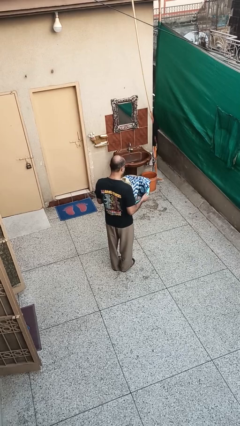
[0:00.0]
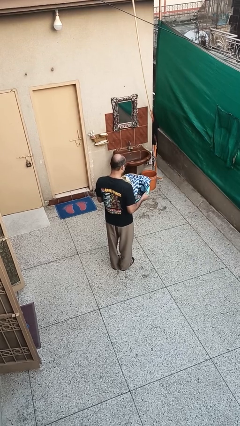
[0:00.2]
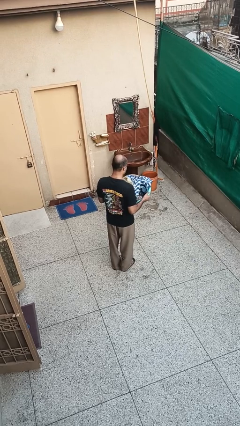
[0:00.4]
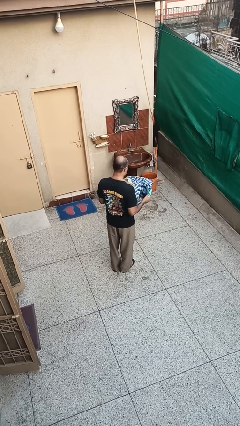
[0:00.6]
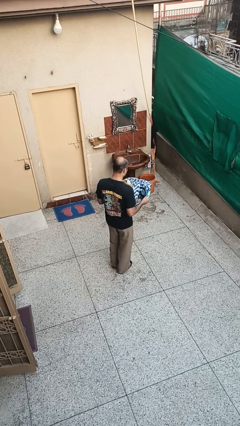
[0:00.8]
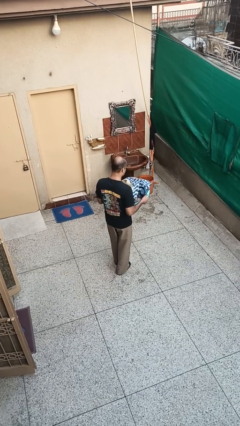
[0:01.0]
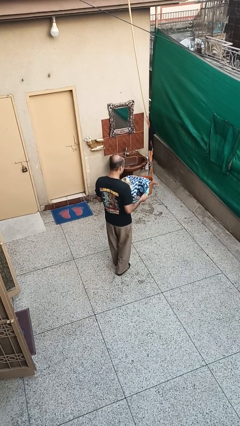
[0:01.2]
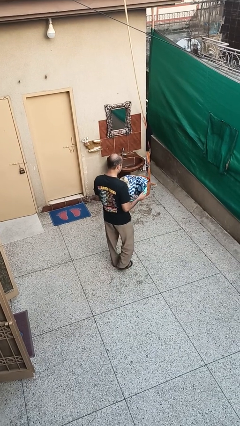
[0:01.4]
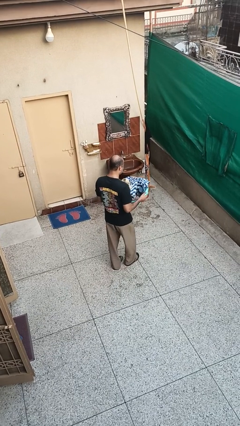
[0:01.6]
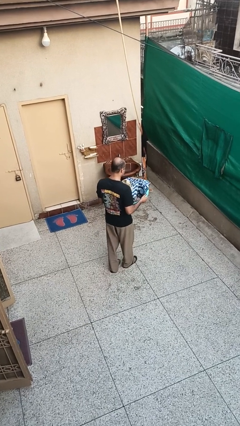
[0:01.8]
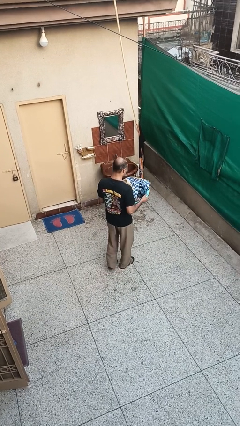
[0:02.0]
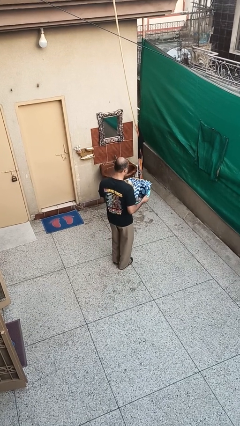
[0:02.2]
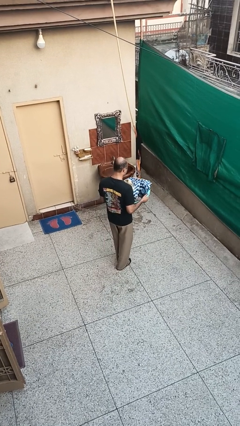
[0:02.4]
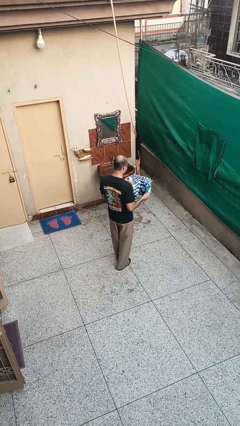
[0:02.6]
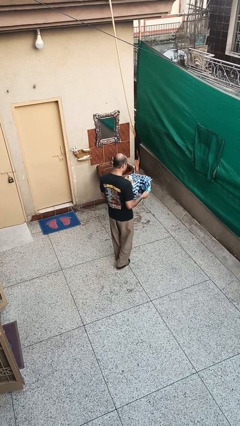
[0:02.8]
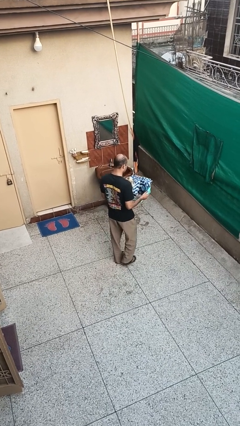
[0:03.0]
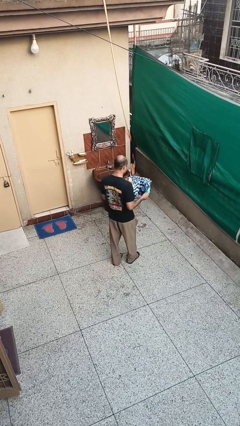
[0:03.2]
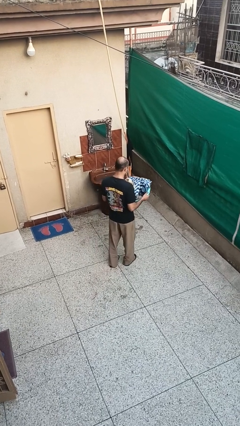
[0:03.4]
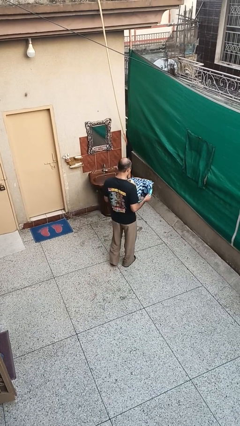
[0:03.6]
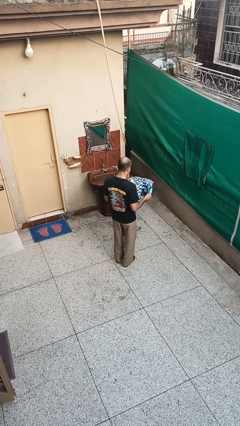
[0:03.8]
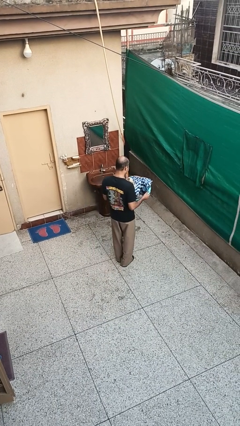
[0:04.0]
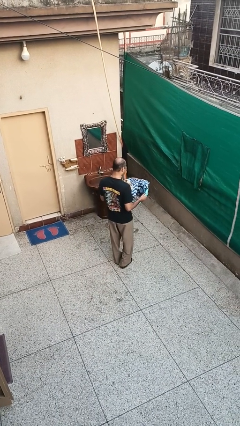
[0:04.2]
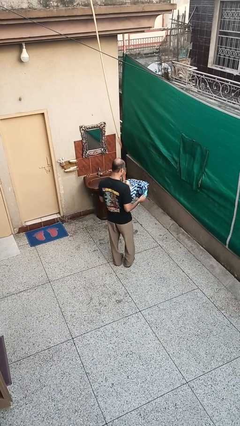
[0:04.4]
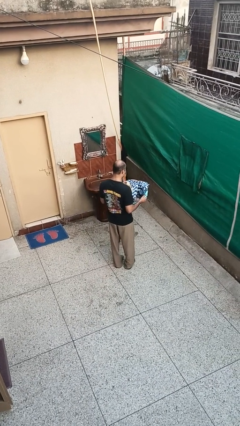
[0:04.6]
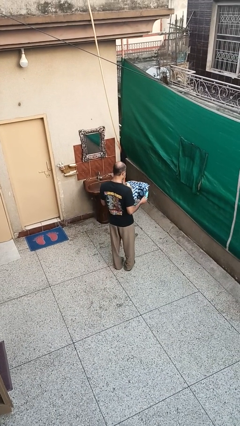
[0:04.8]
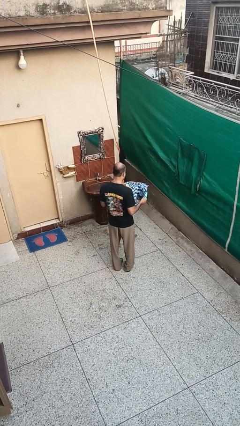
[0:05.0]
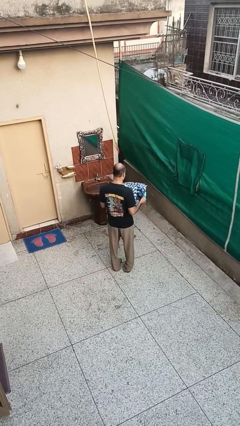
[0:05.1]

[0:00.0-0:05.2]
person carries laundry basket

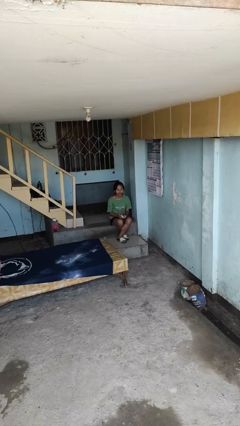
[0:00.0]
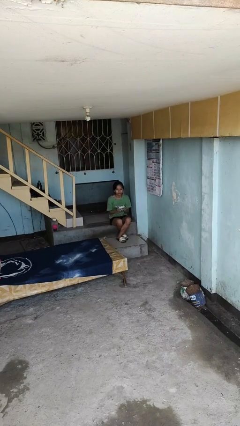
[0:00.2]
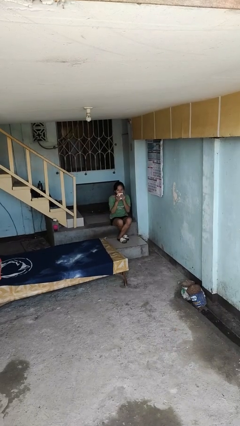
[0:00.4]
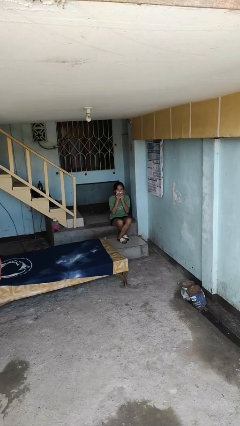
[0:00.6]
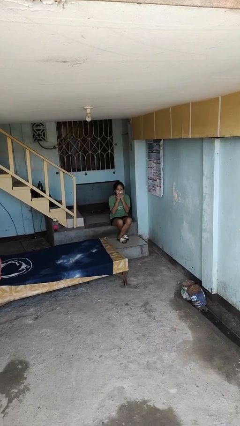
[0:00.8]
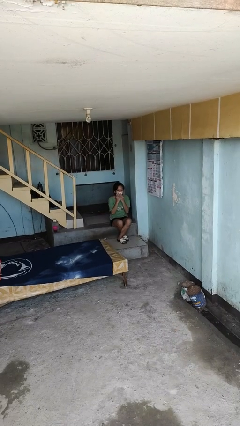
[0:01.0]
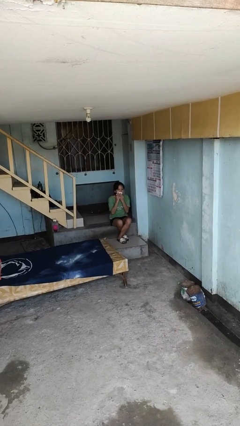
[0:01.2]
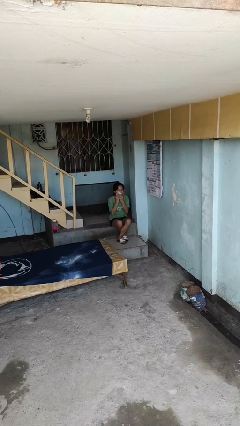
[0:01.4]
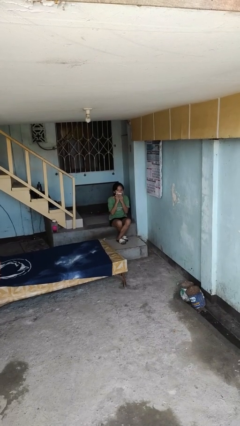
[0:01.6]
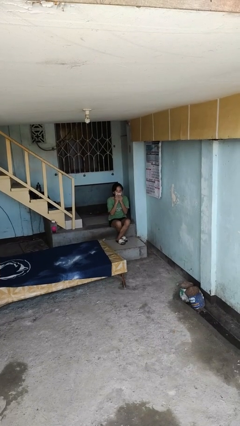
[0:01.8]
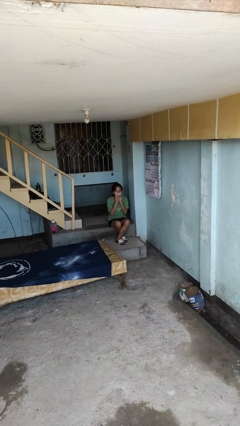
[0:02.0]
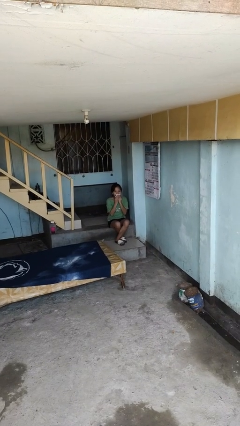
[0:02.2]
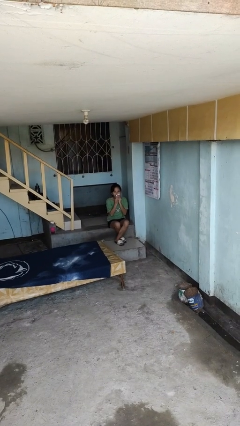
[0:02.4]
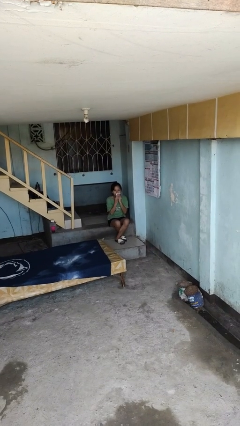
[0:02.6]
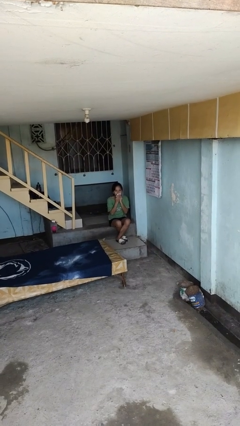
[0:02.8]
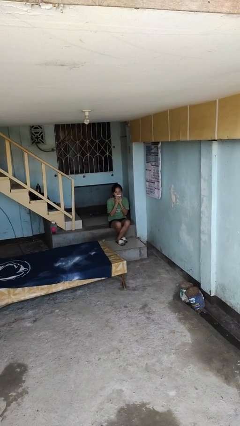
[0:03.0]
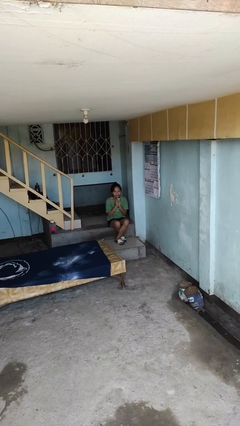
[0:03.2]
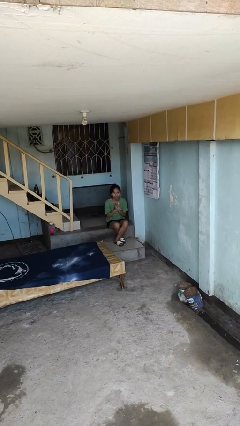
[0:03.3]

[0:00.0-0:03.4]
person wipes mouth with napkin

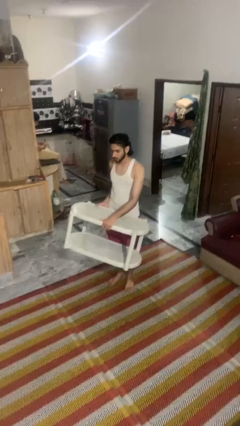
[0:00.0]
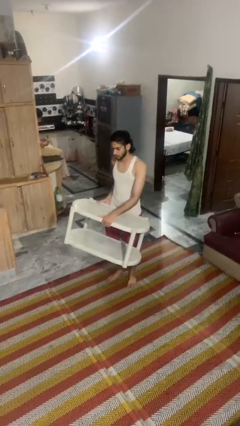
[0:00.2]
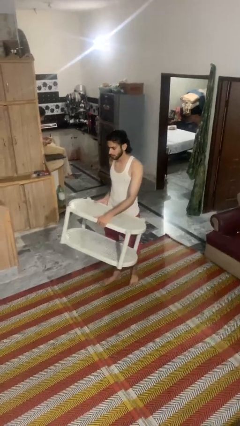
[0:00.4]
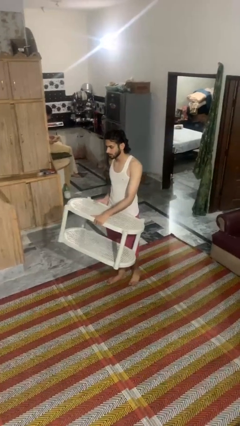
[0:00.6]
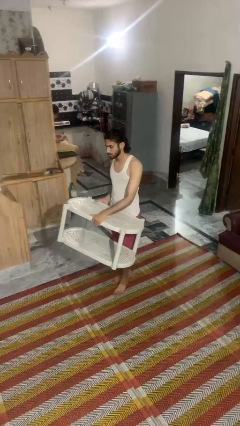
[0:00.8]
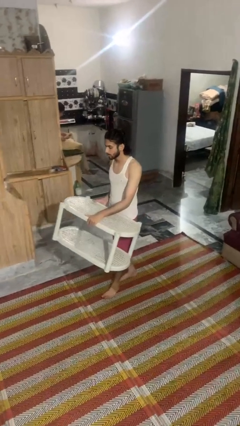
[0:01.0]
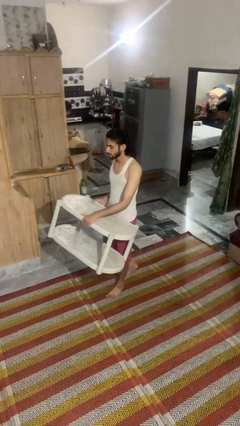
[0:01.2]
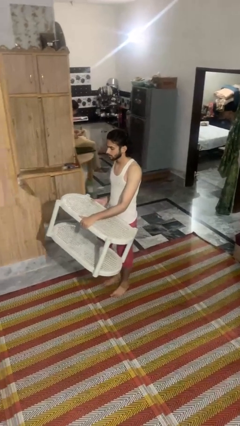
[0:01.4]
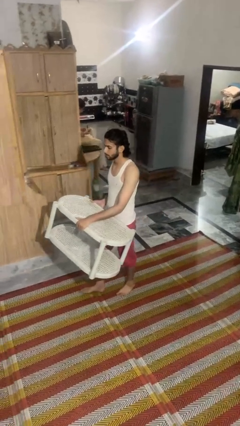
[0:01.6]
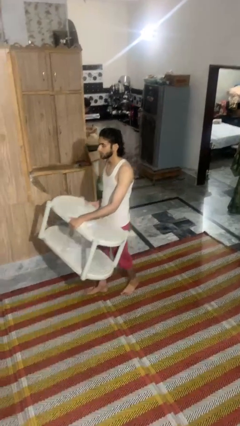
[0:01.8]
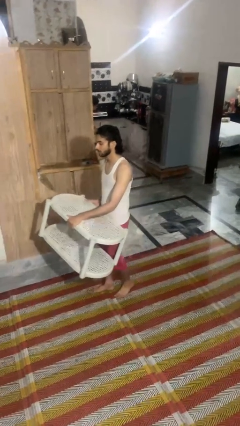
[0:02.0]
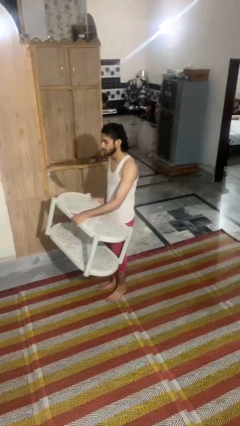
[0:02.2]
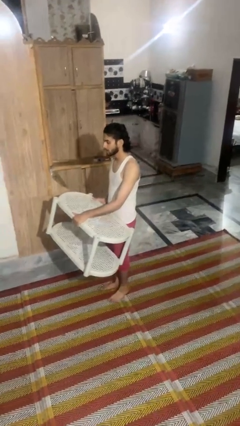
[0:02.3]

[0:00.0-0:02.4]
person carries furniture

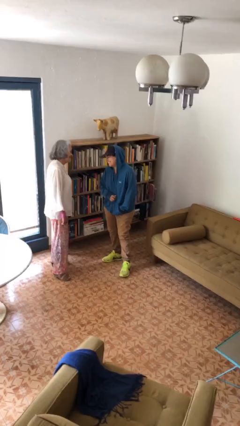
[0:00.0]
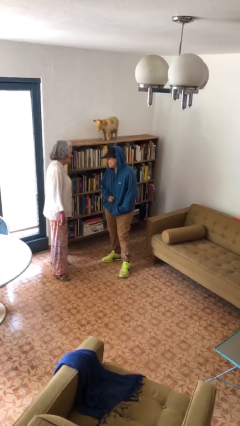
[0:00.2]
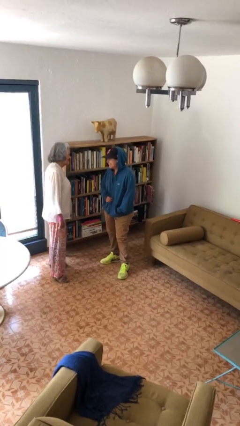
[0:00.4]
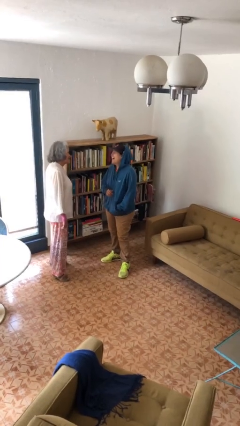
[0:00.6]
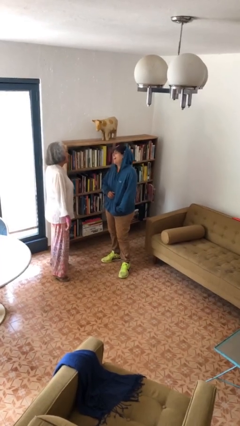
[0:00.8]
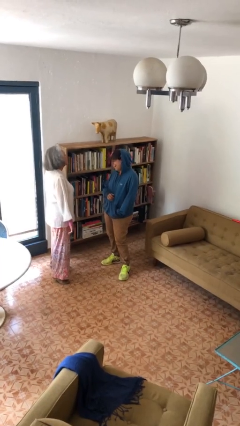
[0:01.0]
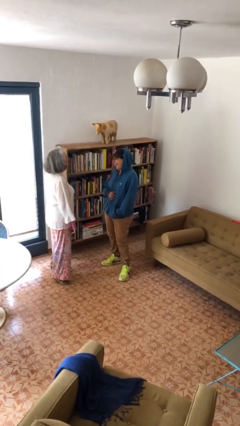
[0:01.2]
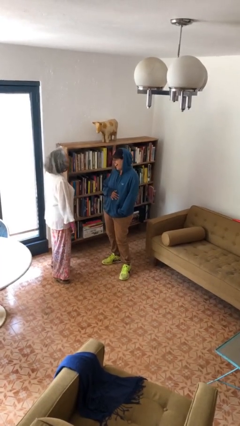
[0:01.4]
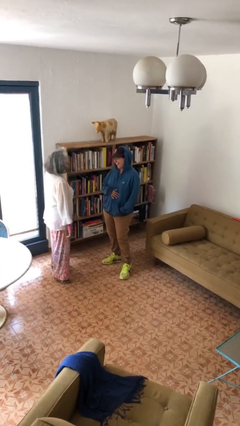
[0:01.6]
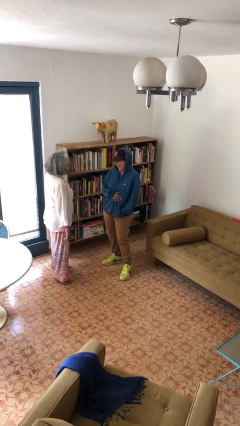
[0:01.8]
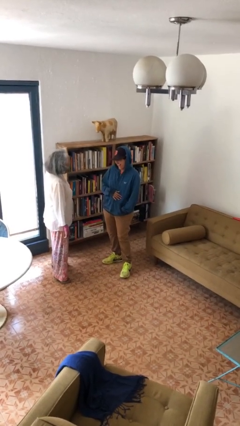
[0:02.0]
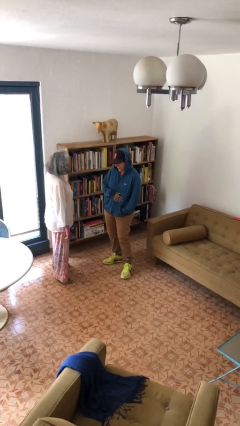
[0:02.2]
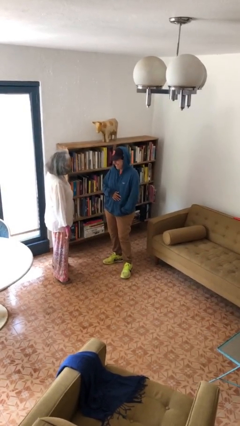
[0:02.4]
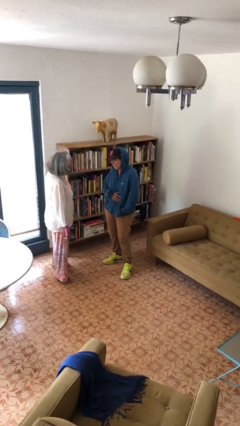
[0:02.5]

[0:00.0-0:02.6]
person laughs with person

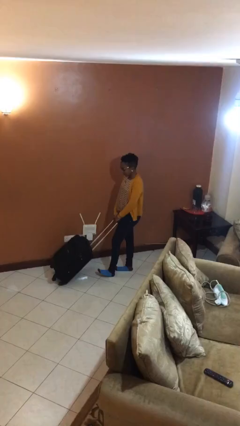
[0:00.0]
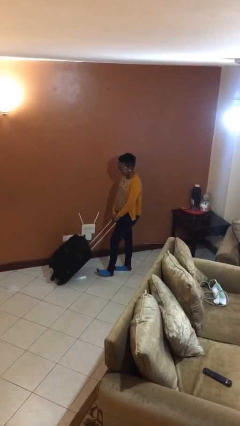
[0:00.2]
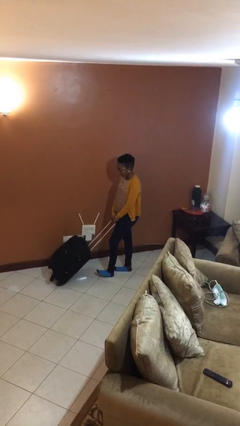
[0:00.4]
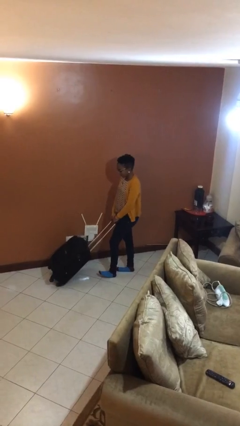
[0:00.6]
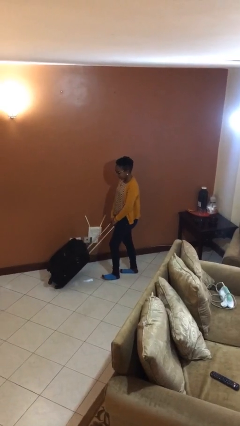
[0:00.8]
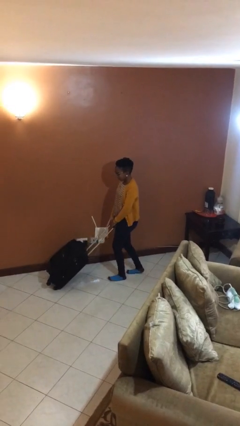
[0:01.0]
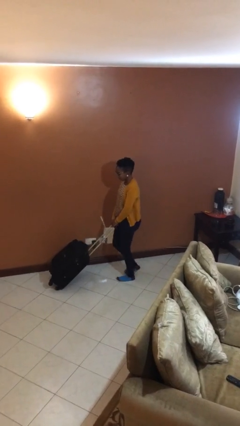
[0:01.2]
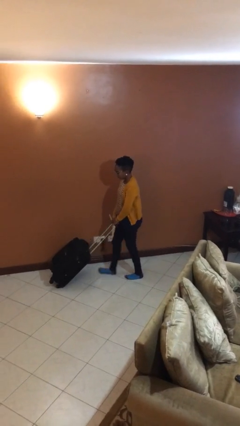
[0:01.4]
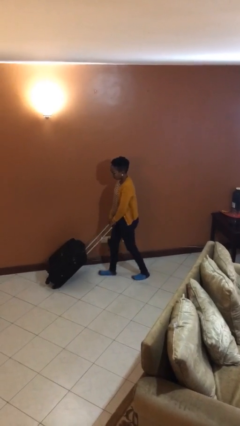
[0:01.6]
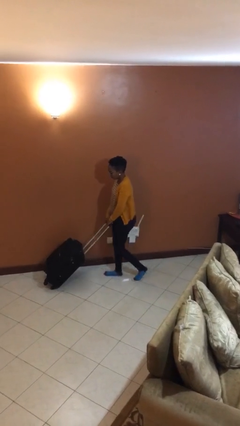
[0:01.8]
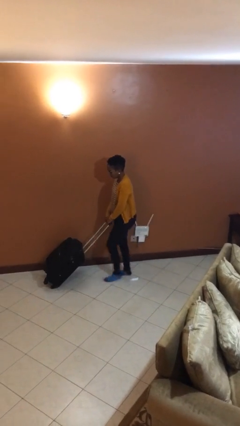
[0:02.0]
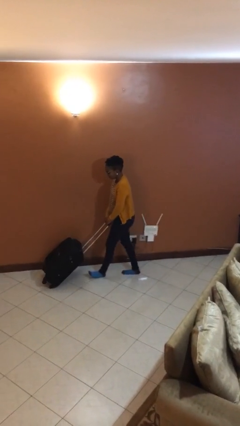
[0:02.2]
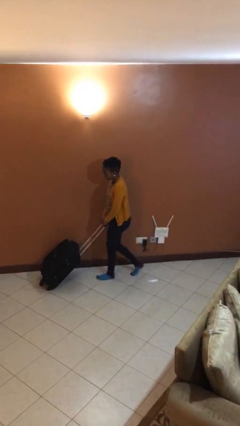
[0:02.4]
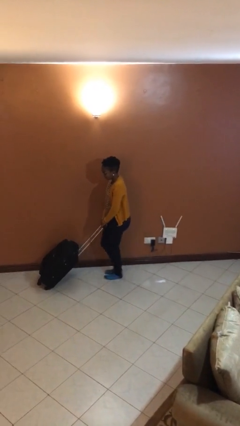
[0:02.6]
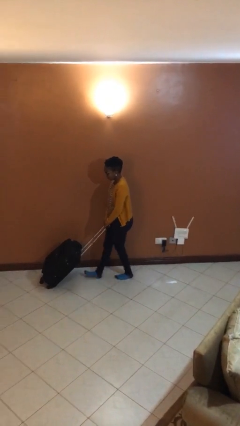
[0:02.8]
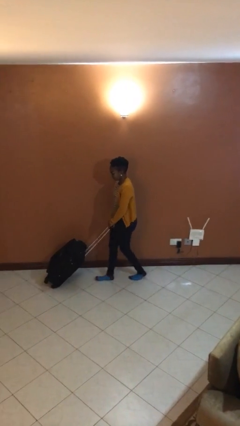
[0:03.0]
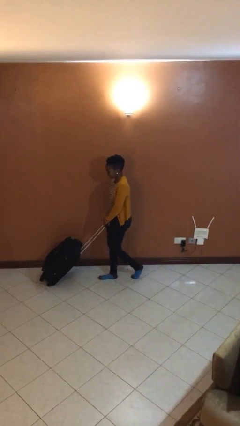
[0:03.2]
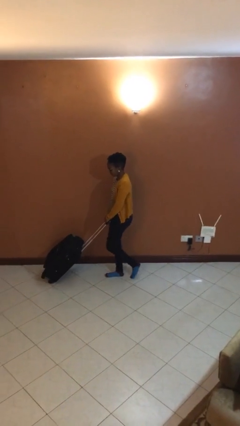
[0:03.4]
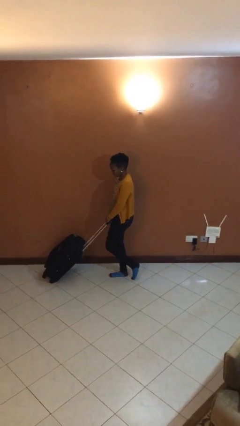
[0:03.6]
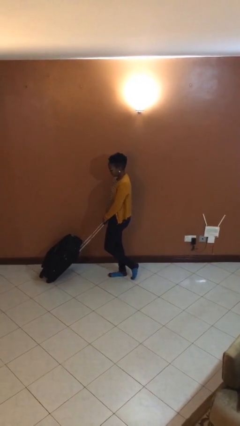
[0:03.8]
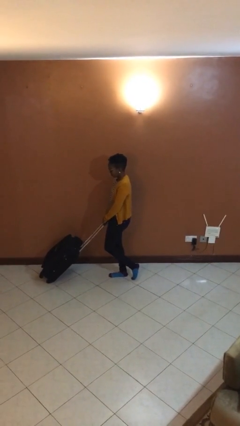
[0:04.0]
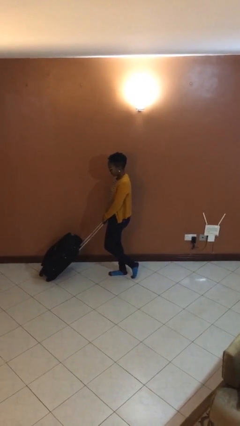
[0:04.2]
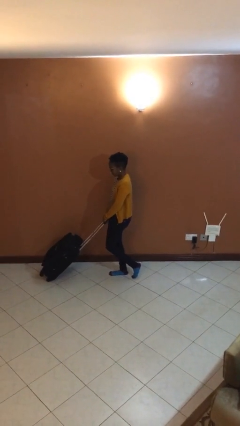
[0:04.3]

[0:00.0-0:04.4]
person pushes wheeled cart
